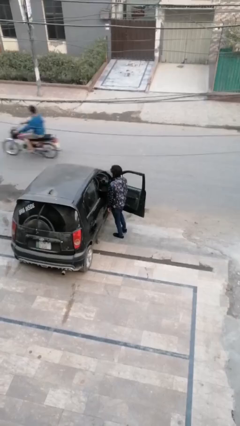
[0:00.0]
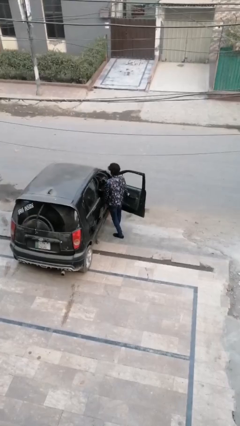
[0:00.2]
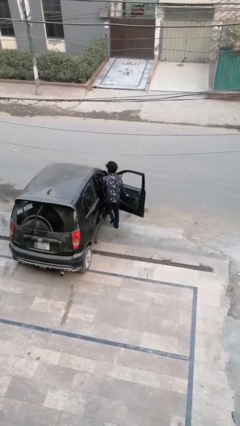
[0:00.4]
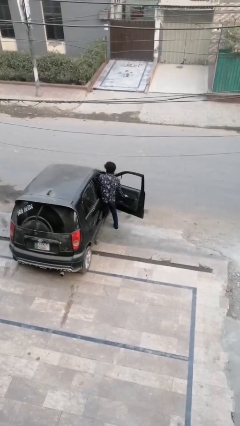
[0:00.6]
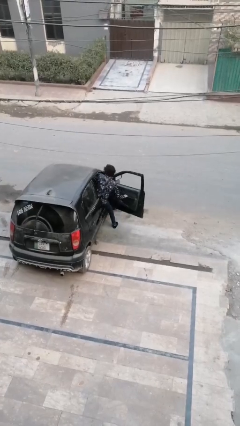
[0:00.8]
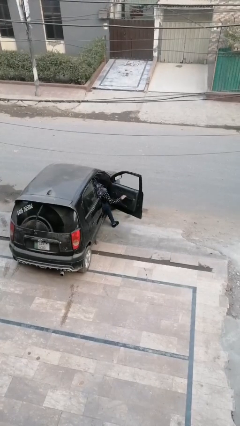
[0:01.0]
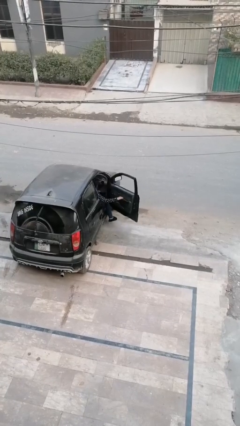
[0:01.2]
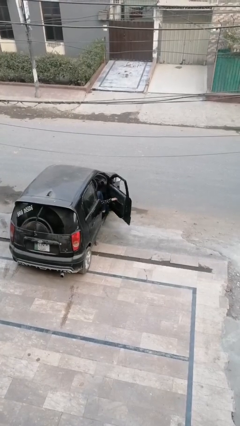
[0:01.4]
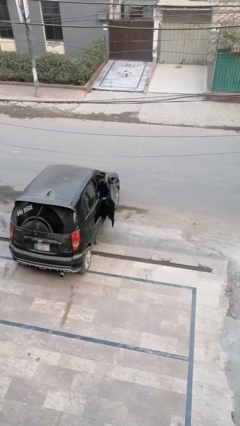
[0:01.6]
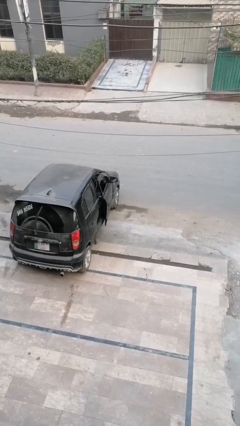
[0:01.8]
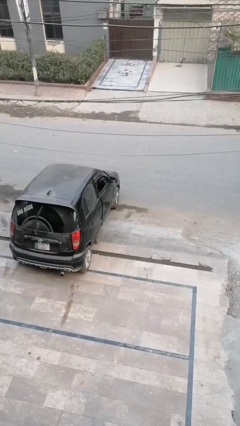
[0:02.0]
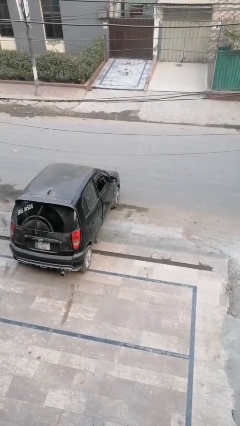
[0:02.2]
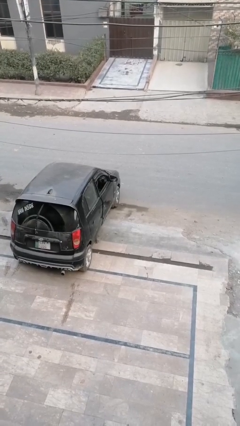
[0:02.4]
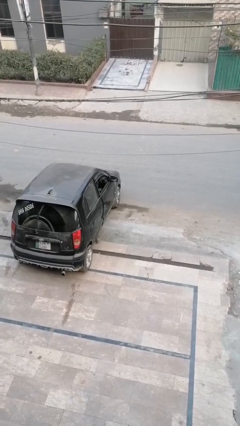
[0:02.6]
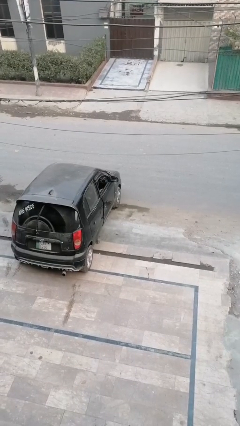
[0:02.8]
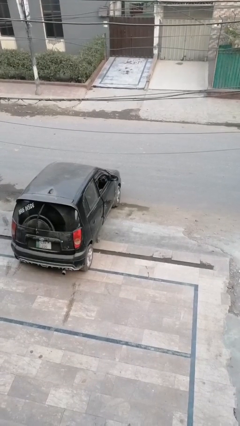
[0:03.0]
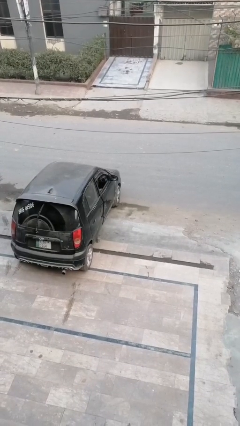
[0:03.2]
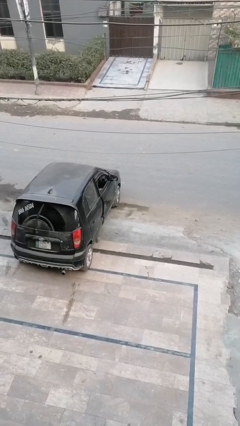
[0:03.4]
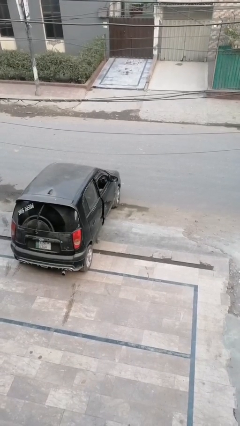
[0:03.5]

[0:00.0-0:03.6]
person enters car

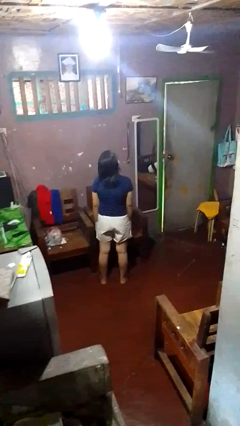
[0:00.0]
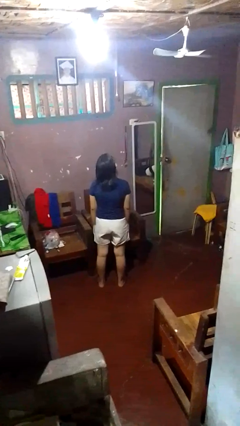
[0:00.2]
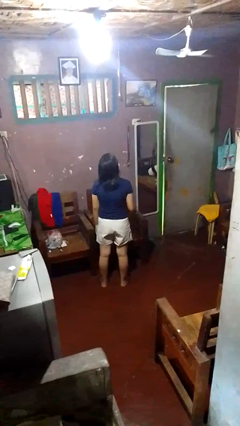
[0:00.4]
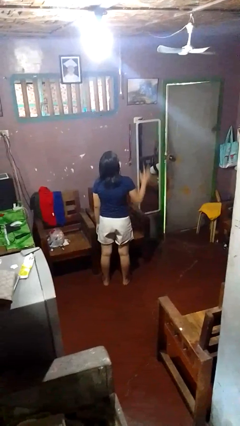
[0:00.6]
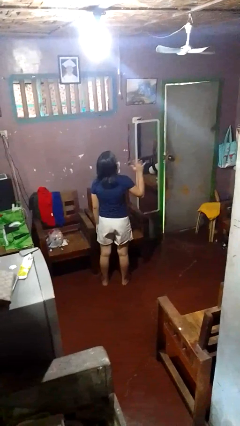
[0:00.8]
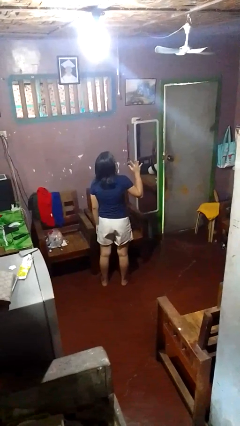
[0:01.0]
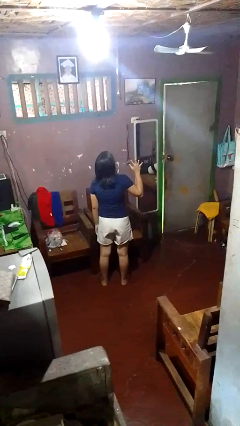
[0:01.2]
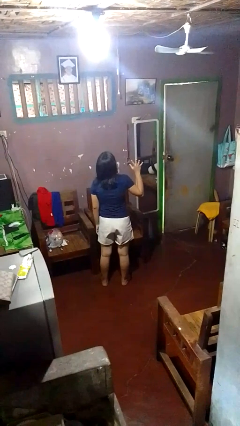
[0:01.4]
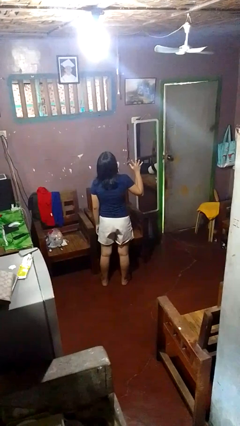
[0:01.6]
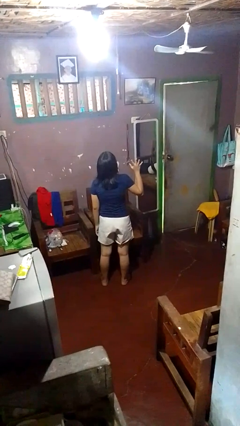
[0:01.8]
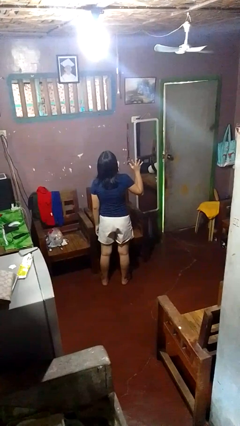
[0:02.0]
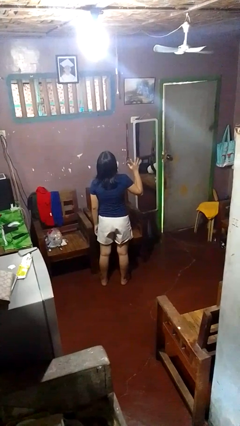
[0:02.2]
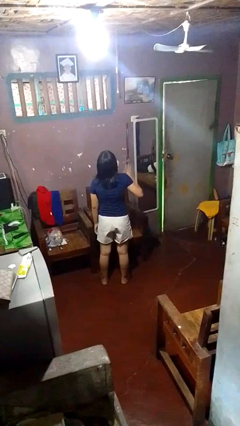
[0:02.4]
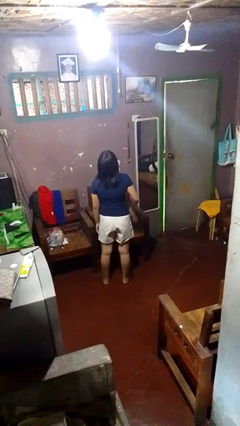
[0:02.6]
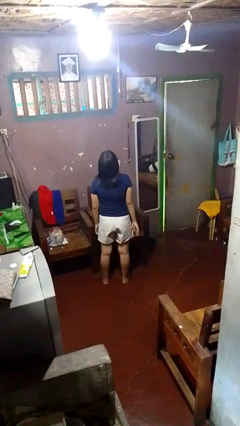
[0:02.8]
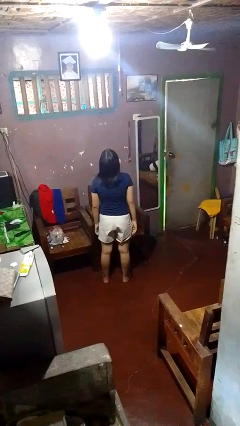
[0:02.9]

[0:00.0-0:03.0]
person gestures number five

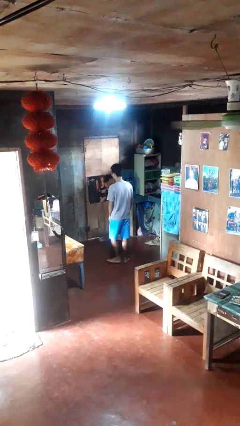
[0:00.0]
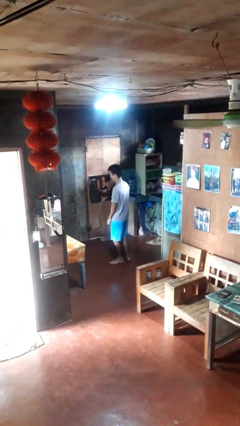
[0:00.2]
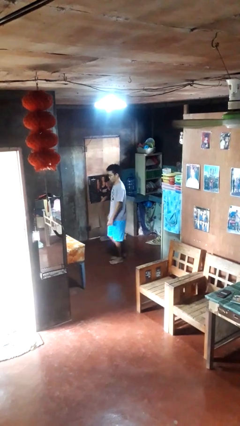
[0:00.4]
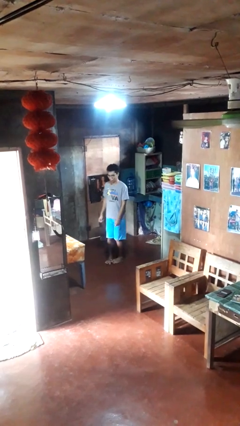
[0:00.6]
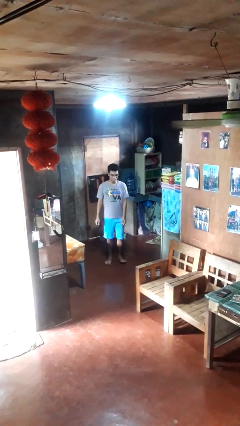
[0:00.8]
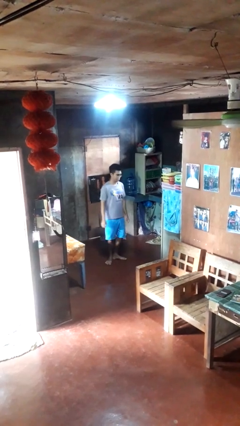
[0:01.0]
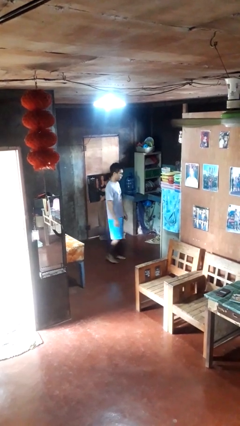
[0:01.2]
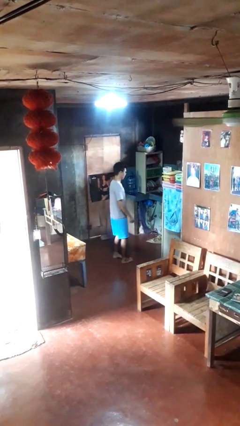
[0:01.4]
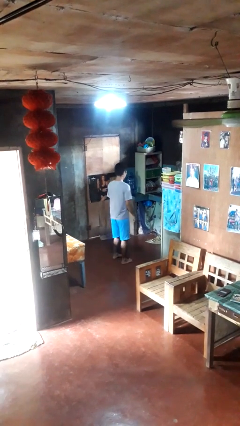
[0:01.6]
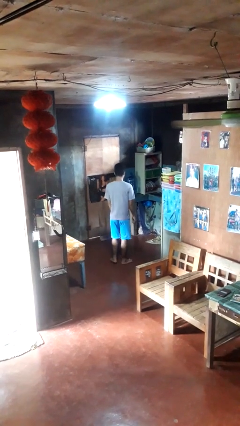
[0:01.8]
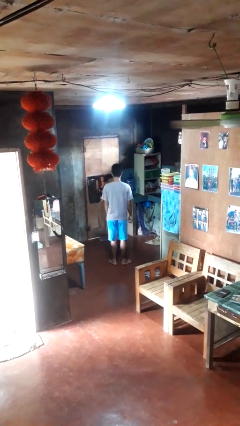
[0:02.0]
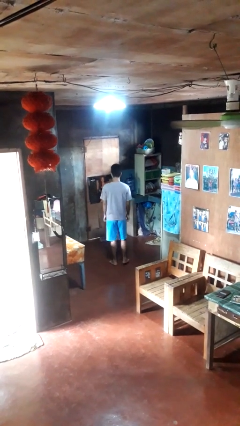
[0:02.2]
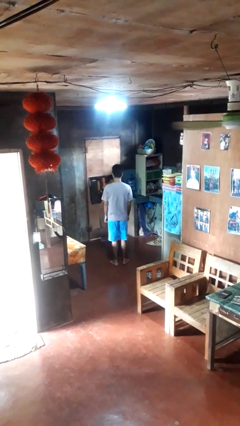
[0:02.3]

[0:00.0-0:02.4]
person twirls

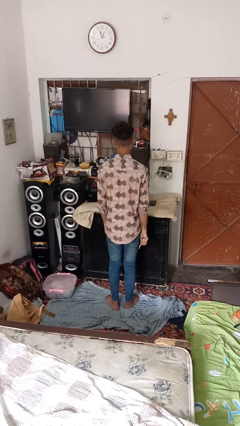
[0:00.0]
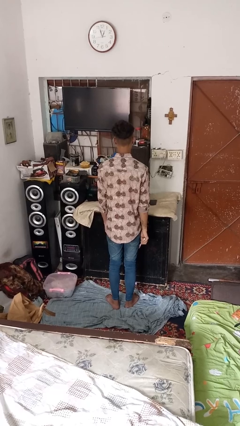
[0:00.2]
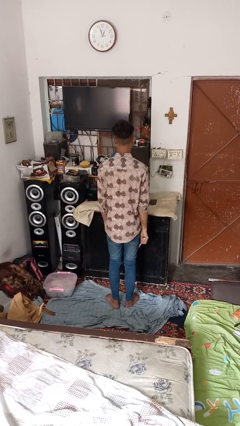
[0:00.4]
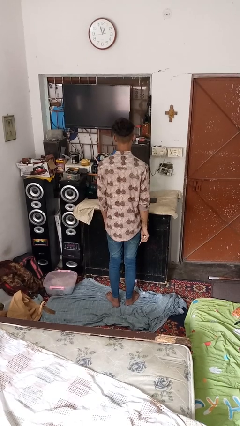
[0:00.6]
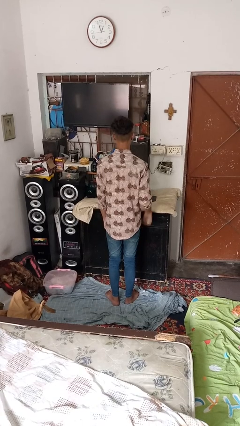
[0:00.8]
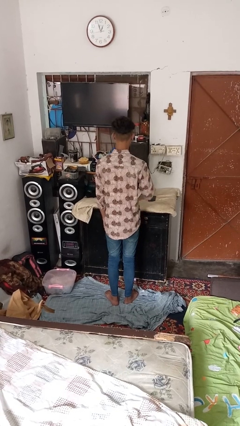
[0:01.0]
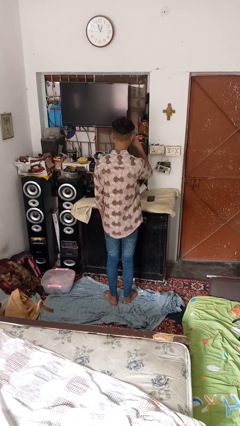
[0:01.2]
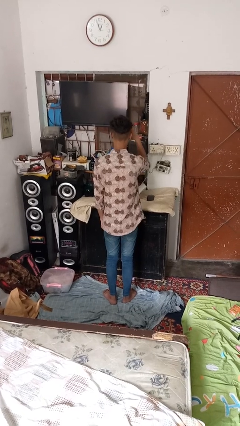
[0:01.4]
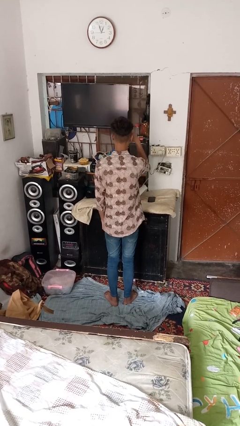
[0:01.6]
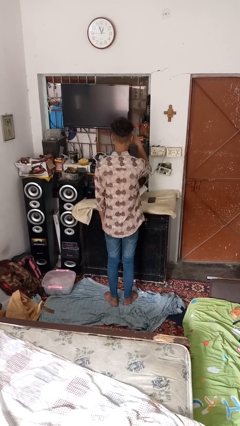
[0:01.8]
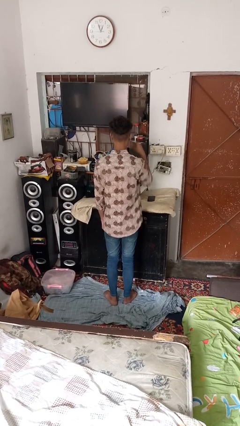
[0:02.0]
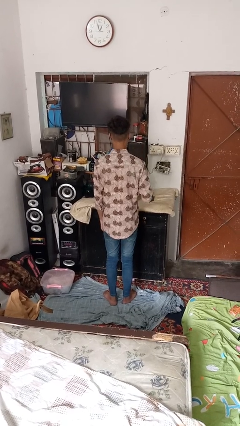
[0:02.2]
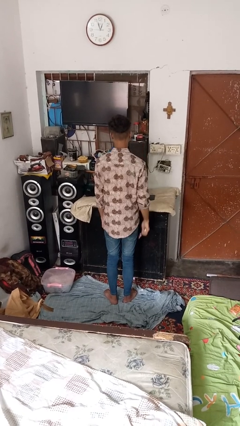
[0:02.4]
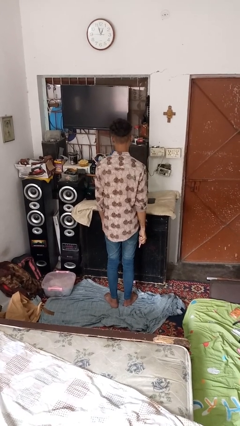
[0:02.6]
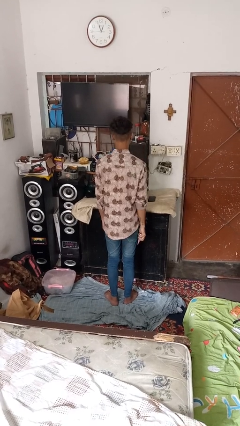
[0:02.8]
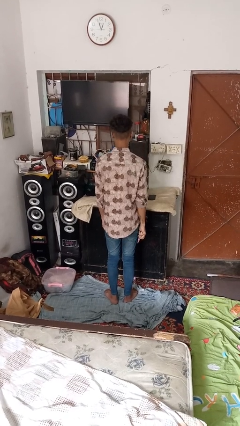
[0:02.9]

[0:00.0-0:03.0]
person applies eye makeup

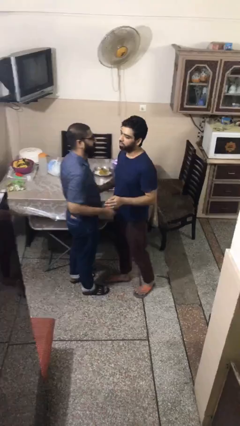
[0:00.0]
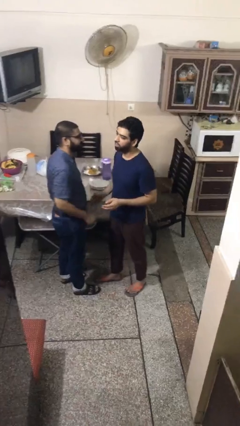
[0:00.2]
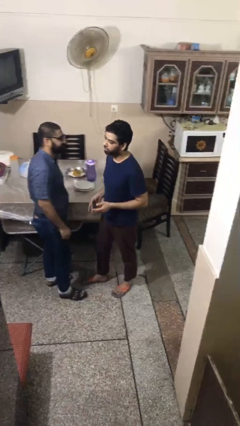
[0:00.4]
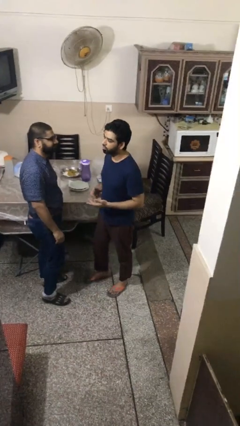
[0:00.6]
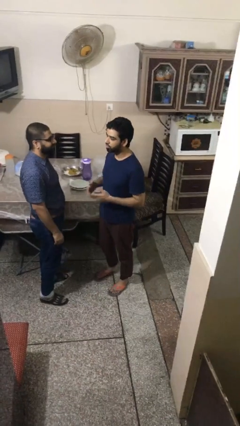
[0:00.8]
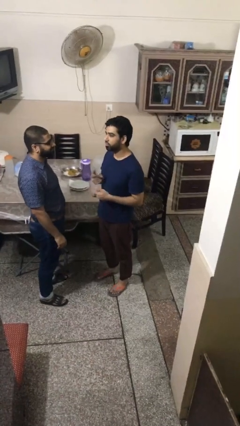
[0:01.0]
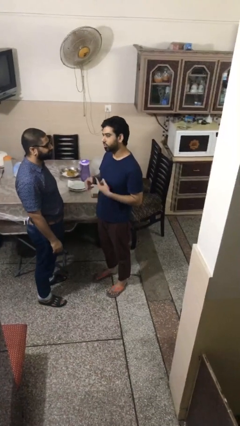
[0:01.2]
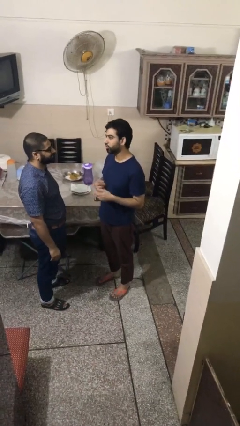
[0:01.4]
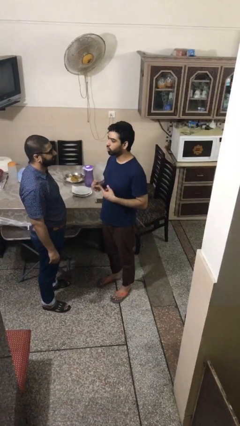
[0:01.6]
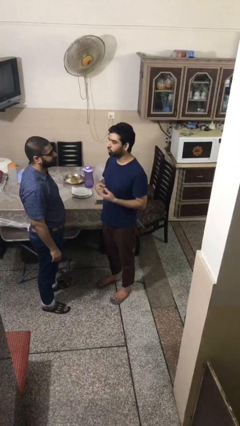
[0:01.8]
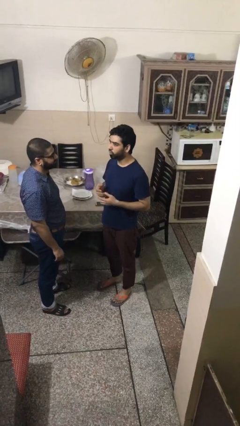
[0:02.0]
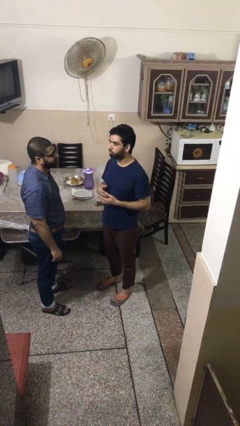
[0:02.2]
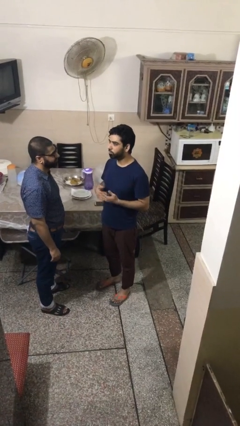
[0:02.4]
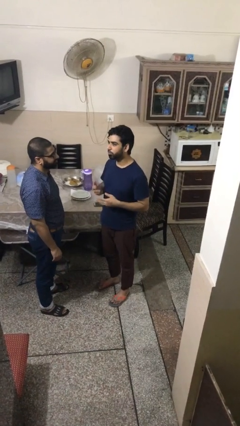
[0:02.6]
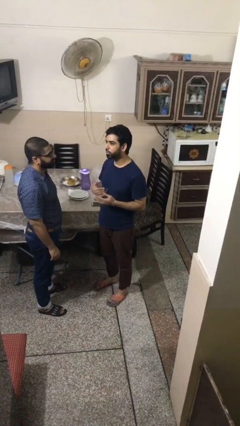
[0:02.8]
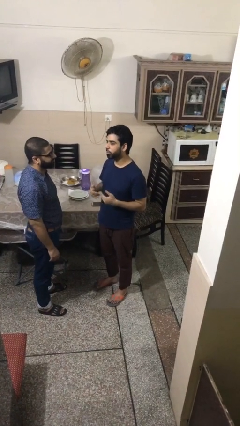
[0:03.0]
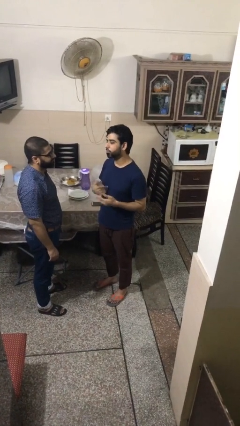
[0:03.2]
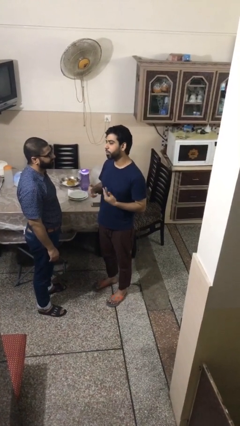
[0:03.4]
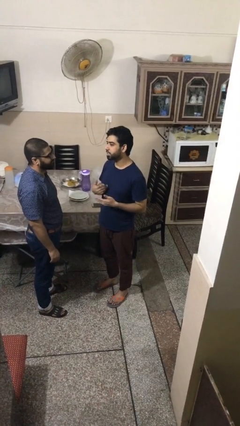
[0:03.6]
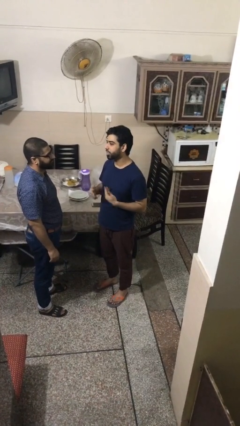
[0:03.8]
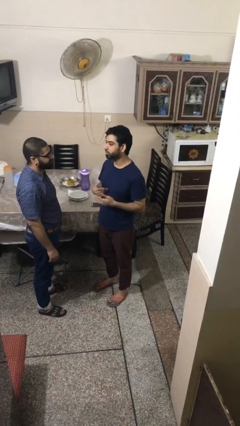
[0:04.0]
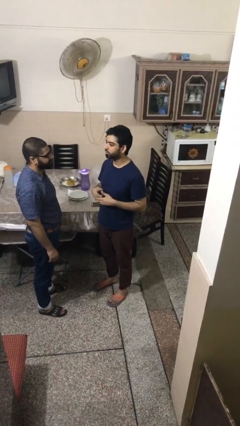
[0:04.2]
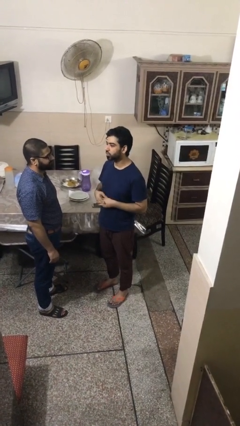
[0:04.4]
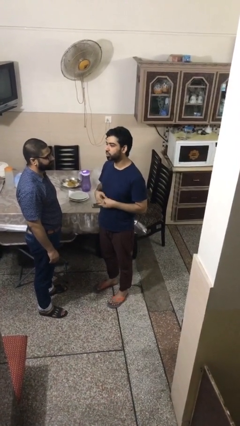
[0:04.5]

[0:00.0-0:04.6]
person talks to person

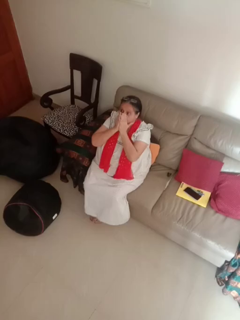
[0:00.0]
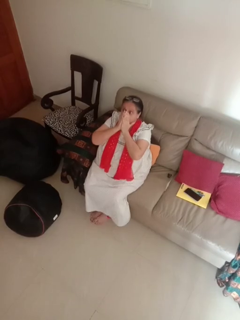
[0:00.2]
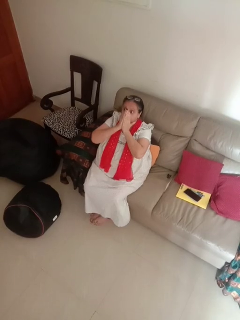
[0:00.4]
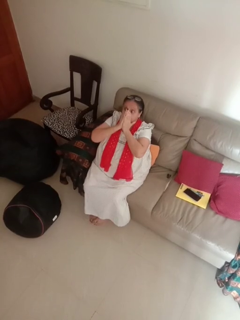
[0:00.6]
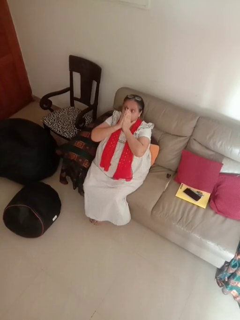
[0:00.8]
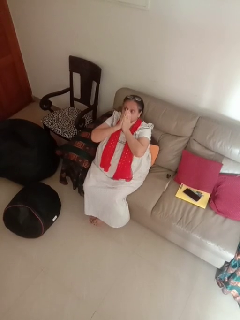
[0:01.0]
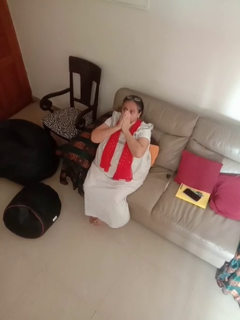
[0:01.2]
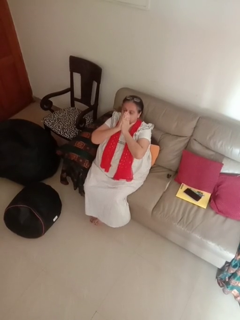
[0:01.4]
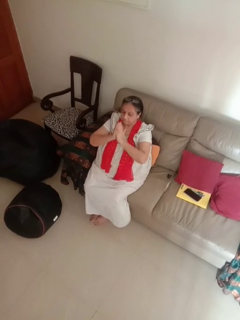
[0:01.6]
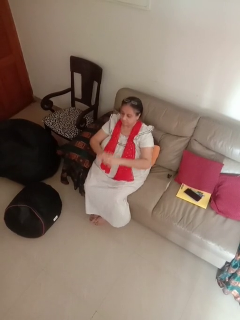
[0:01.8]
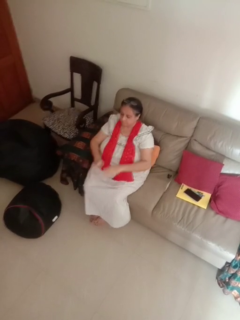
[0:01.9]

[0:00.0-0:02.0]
person covers face with hands
